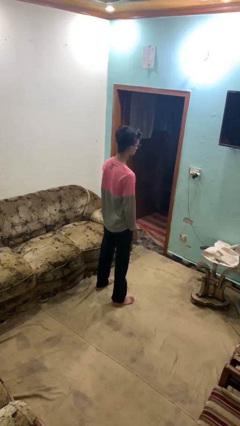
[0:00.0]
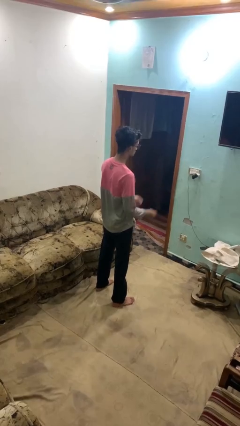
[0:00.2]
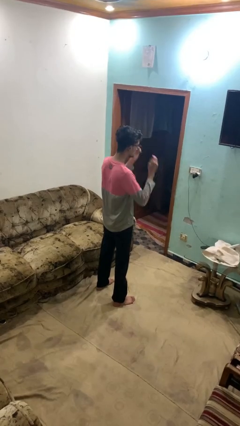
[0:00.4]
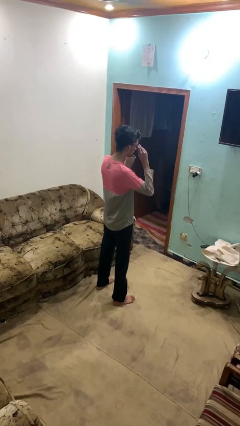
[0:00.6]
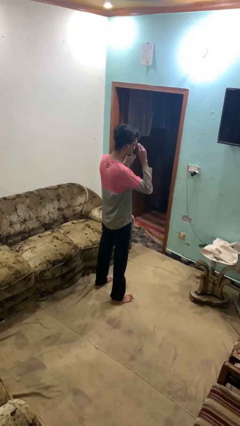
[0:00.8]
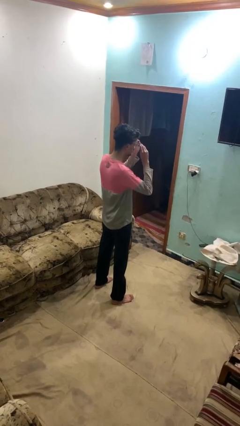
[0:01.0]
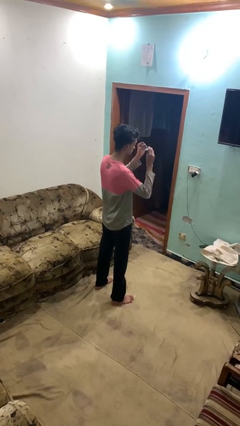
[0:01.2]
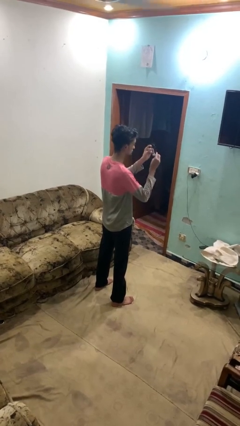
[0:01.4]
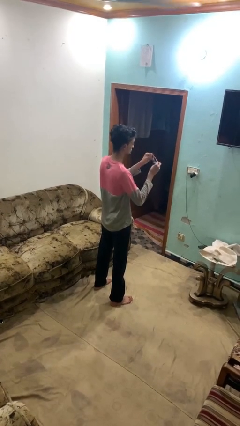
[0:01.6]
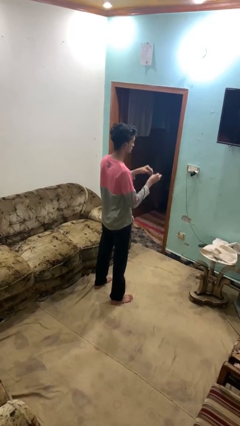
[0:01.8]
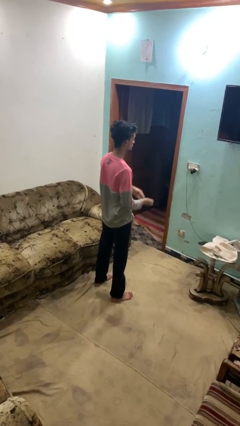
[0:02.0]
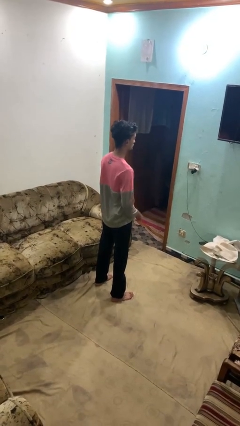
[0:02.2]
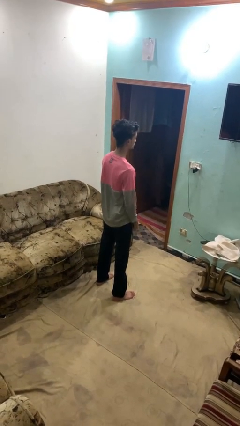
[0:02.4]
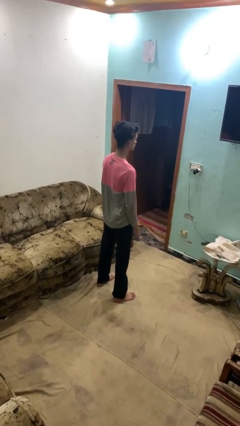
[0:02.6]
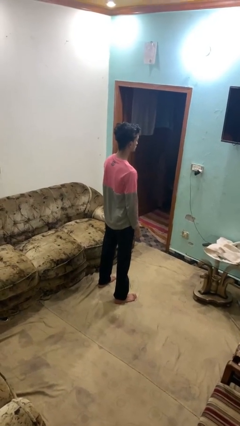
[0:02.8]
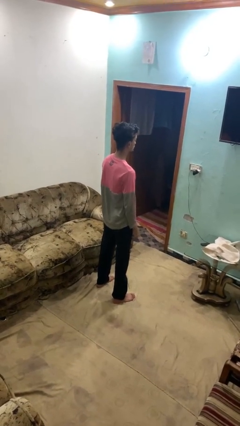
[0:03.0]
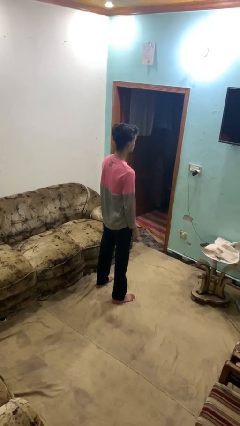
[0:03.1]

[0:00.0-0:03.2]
person takes off glasses

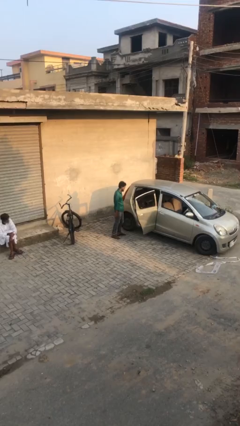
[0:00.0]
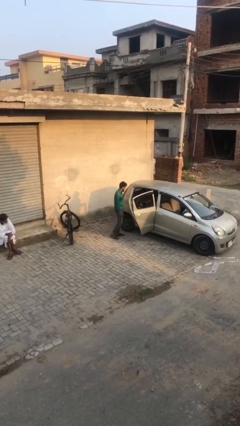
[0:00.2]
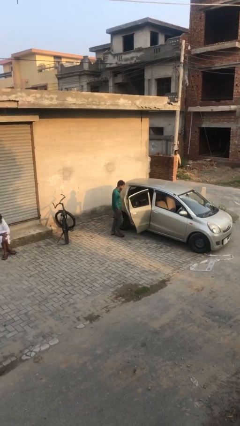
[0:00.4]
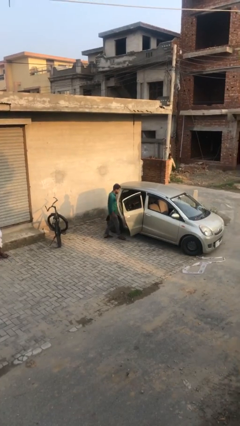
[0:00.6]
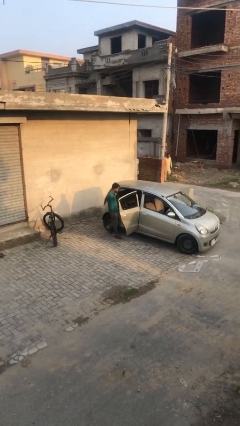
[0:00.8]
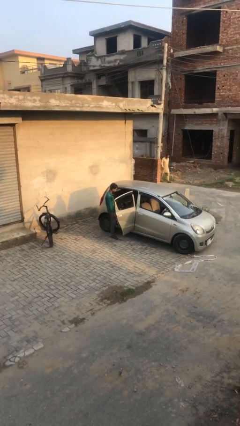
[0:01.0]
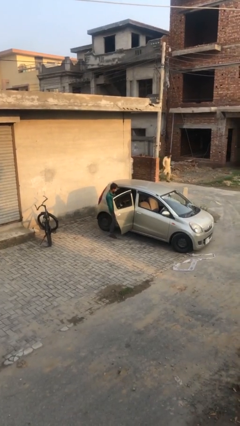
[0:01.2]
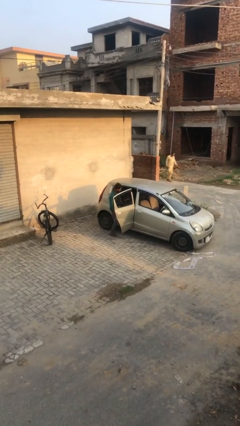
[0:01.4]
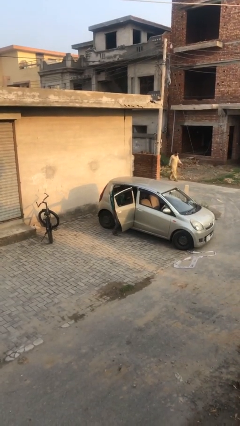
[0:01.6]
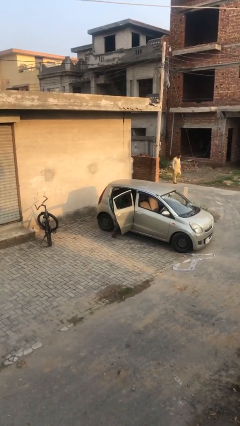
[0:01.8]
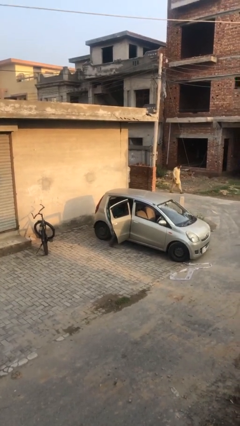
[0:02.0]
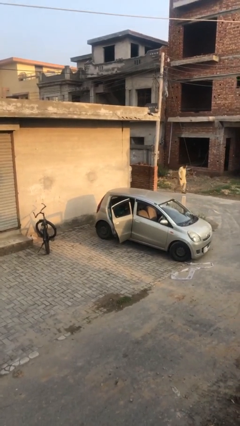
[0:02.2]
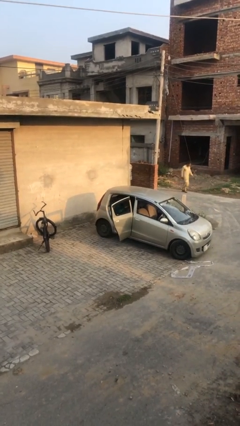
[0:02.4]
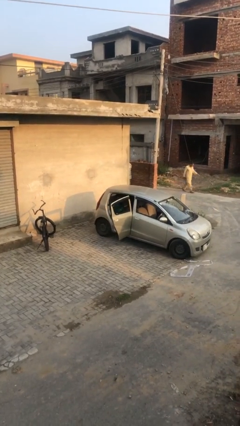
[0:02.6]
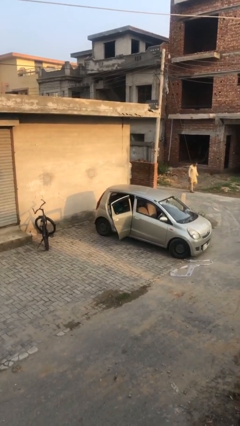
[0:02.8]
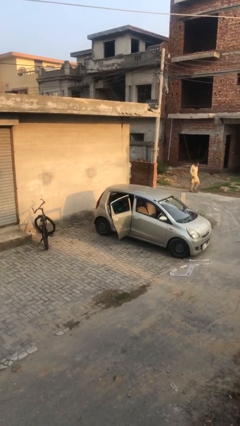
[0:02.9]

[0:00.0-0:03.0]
person enters car

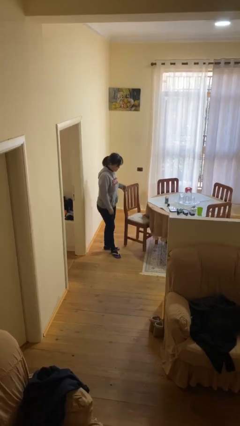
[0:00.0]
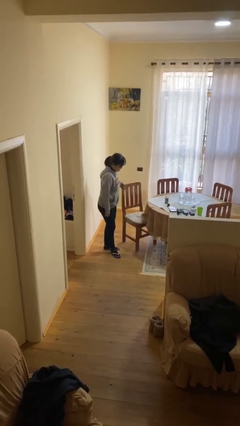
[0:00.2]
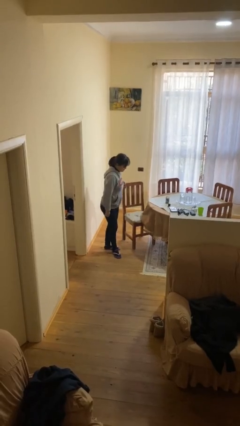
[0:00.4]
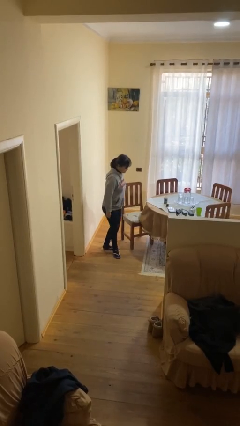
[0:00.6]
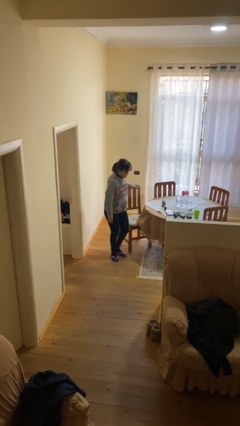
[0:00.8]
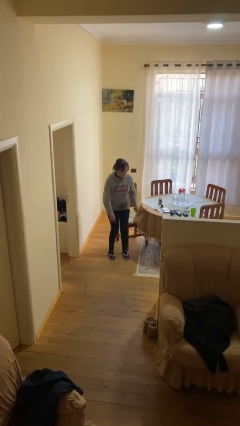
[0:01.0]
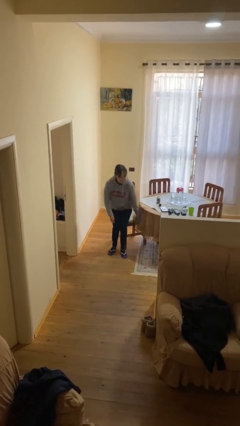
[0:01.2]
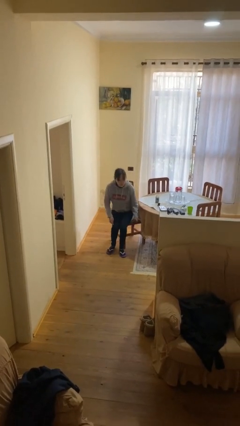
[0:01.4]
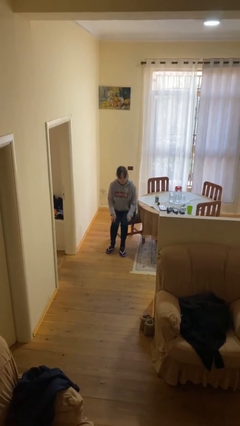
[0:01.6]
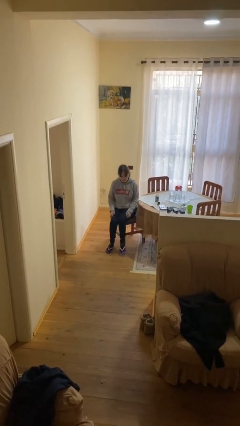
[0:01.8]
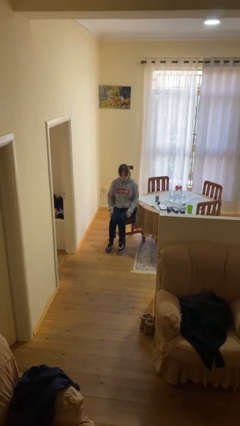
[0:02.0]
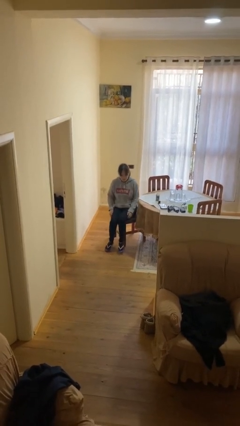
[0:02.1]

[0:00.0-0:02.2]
person sits down

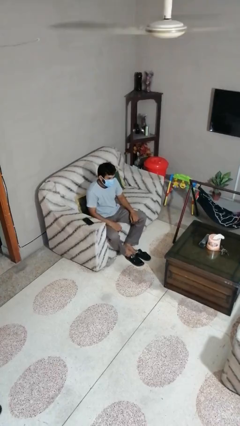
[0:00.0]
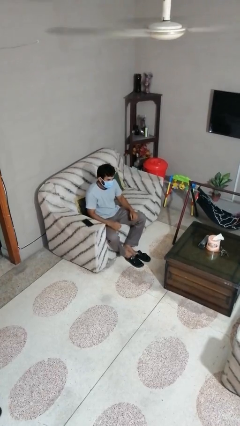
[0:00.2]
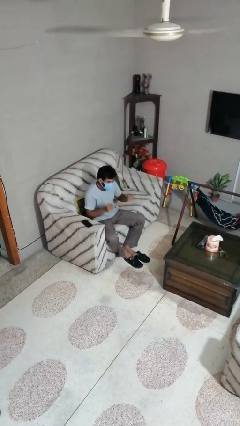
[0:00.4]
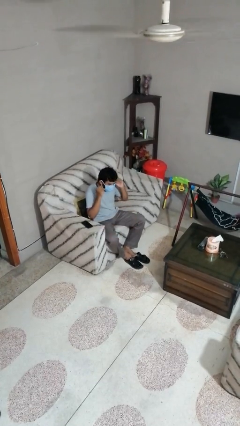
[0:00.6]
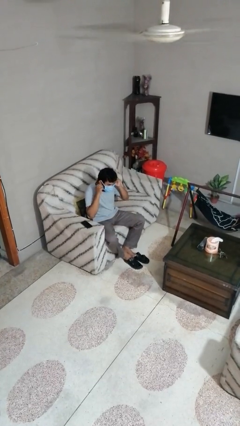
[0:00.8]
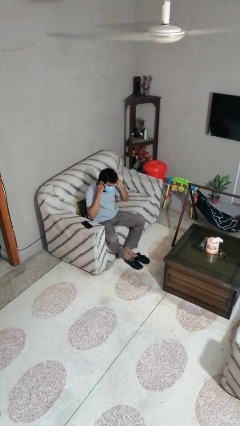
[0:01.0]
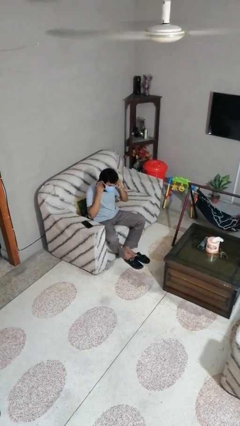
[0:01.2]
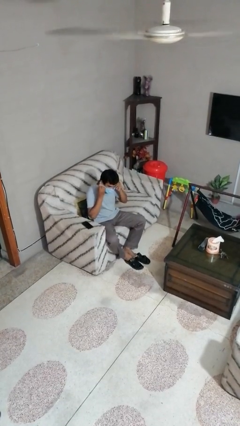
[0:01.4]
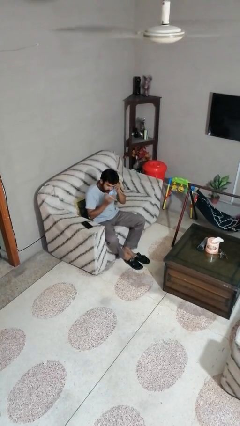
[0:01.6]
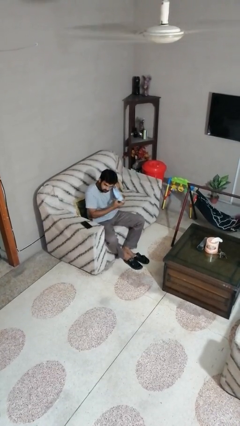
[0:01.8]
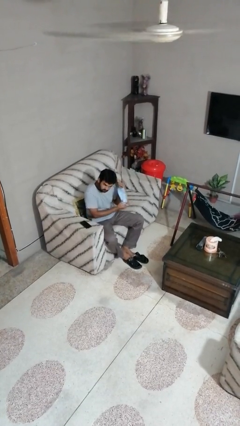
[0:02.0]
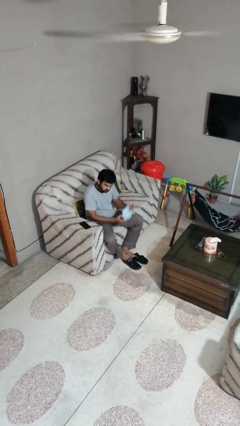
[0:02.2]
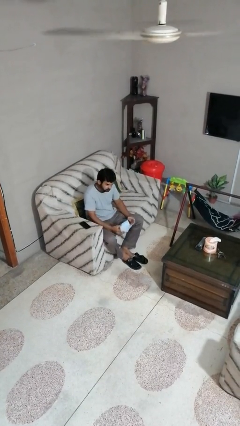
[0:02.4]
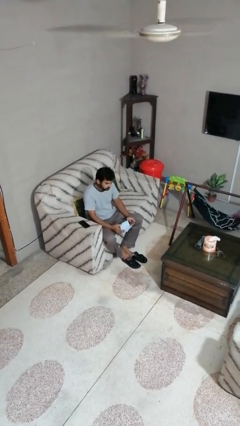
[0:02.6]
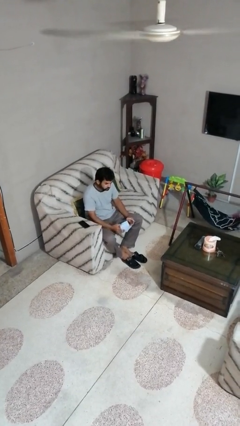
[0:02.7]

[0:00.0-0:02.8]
person takes off facemask

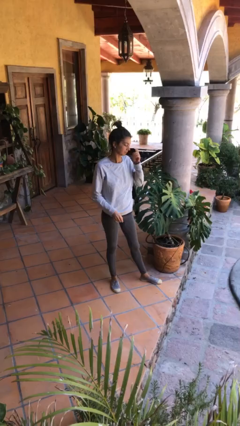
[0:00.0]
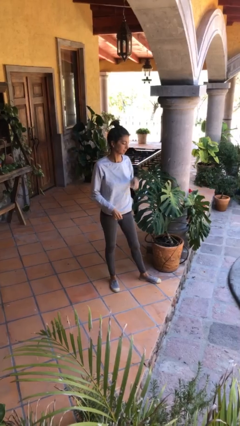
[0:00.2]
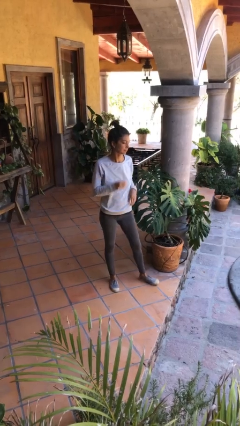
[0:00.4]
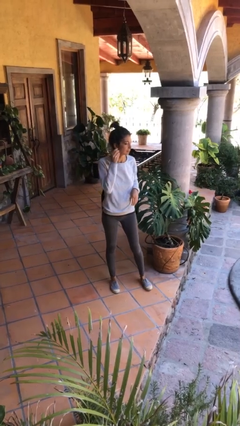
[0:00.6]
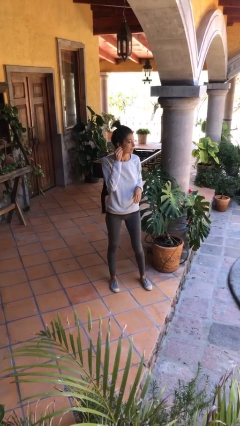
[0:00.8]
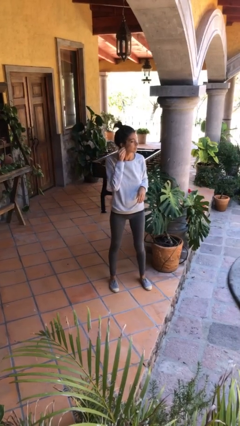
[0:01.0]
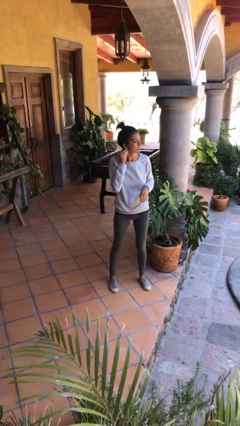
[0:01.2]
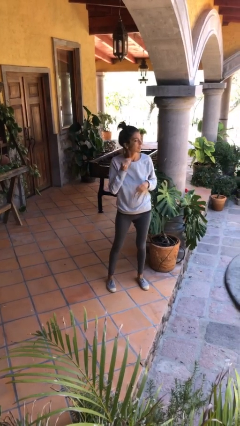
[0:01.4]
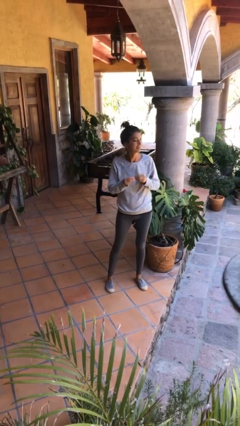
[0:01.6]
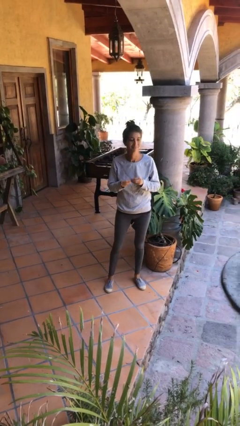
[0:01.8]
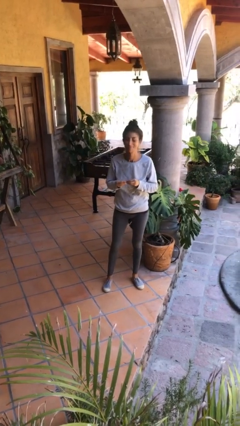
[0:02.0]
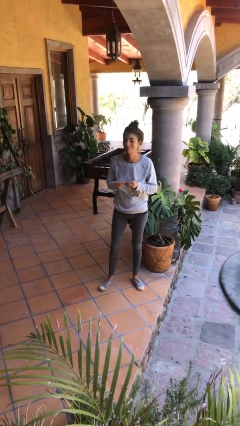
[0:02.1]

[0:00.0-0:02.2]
person takes off earrings

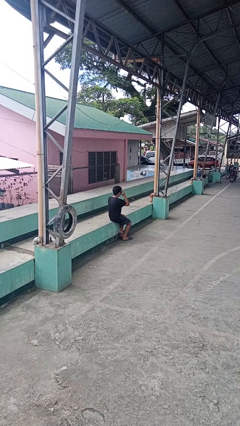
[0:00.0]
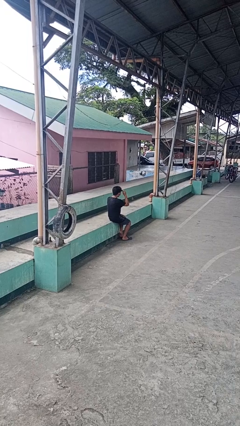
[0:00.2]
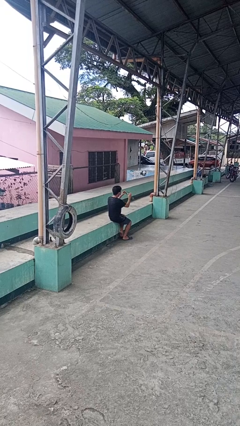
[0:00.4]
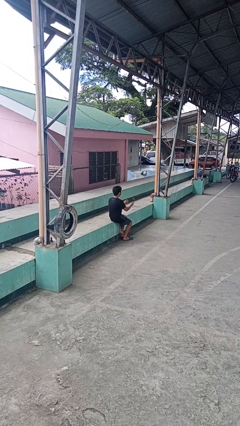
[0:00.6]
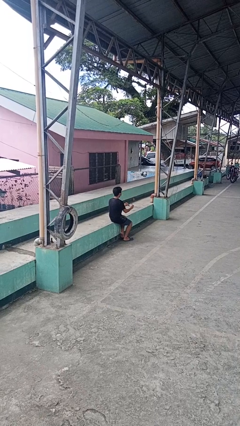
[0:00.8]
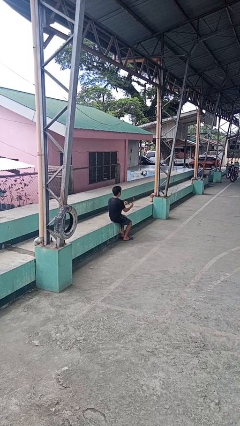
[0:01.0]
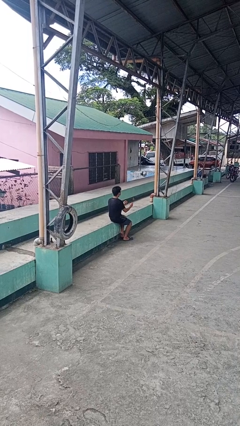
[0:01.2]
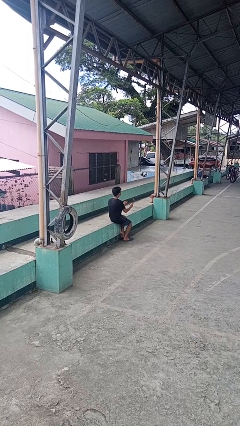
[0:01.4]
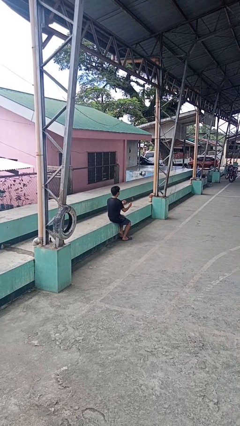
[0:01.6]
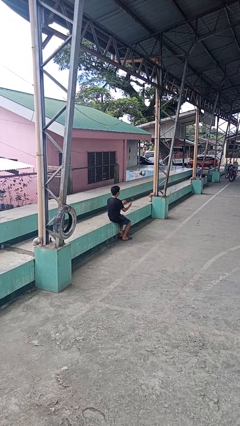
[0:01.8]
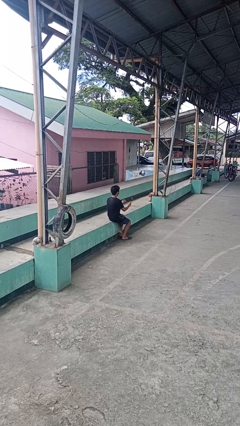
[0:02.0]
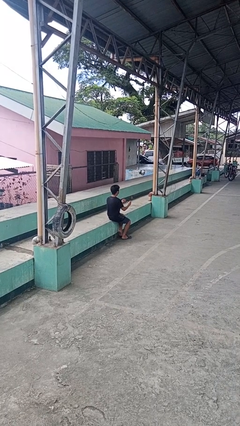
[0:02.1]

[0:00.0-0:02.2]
person takes off sunglasses

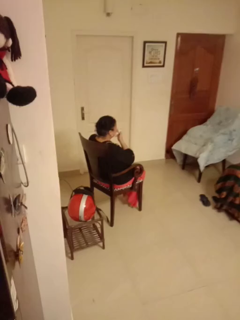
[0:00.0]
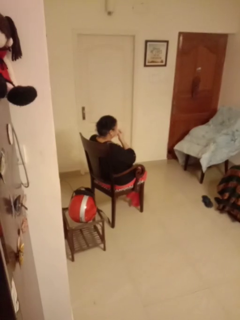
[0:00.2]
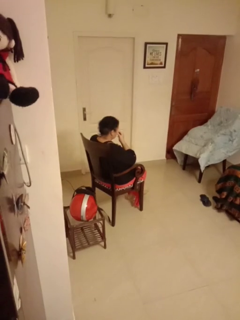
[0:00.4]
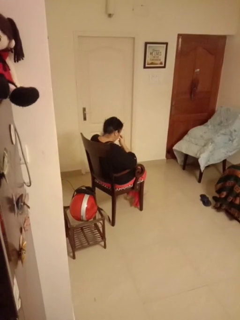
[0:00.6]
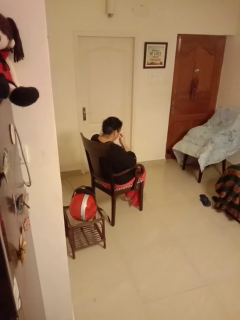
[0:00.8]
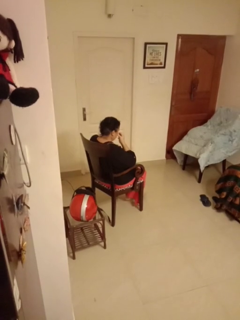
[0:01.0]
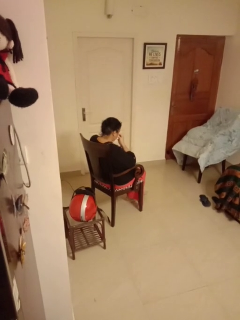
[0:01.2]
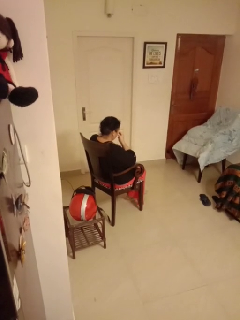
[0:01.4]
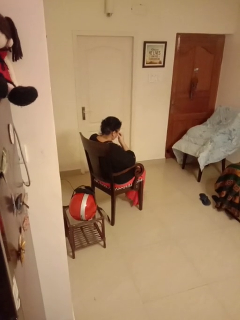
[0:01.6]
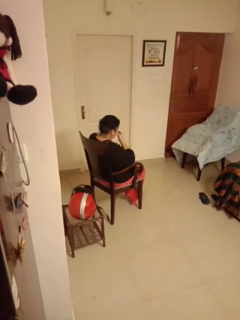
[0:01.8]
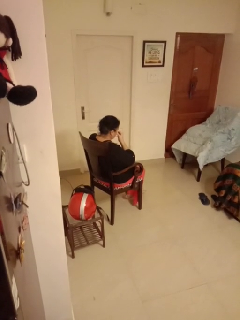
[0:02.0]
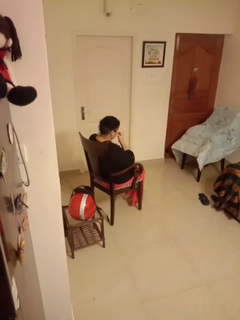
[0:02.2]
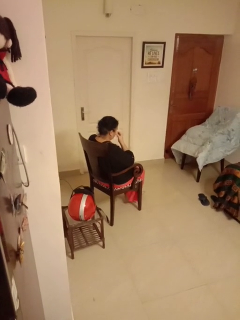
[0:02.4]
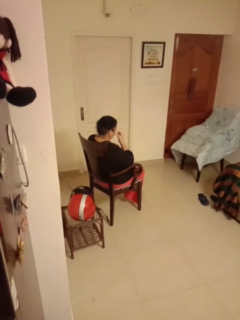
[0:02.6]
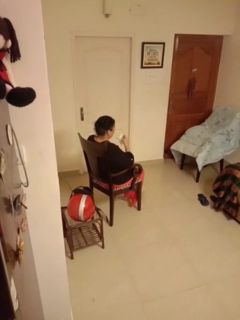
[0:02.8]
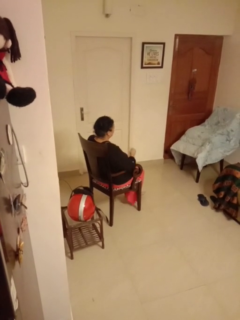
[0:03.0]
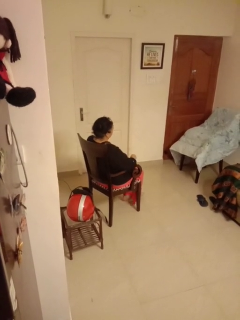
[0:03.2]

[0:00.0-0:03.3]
person blows nose
